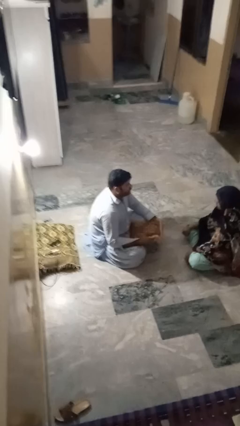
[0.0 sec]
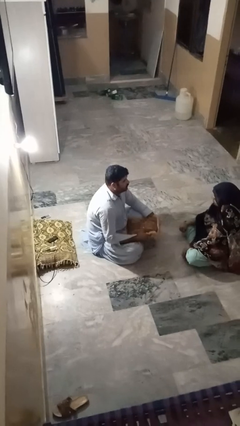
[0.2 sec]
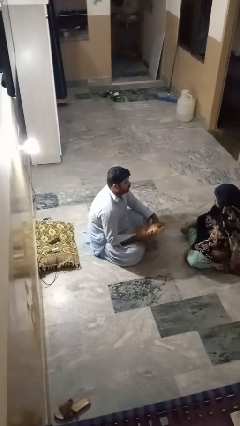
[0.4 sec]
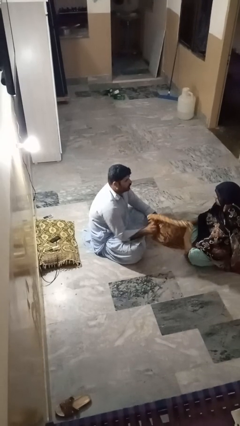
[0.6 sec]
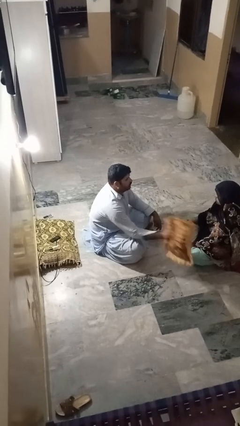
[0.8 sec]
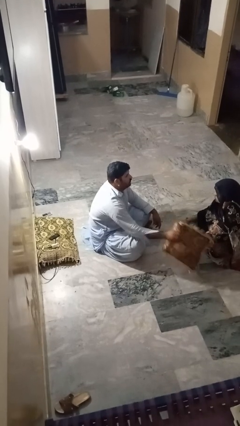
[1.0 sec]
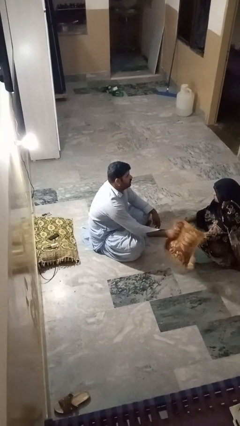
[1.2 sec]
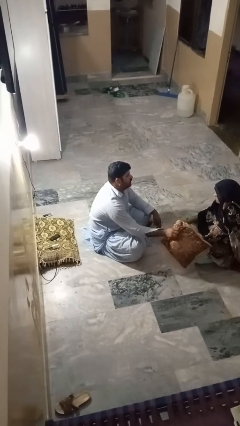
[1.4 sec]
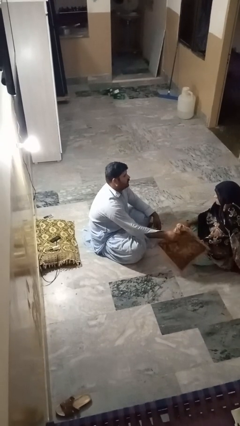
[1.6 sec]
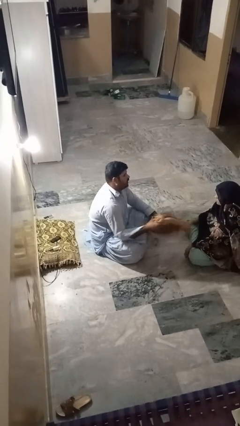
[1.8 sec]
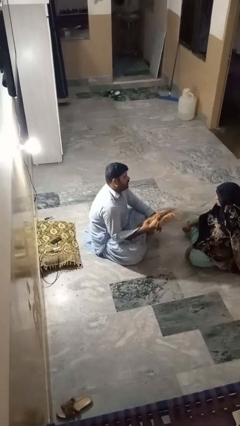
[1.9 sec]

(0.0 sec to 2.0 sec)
person hits person with pillow

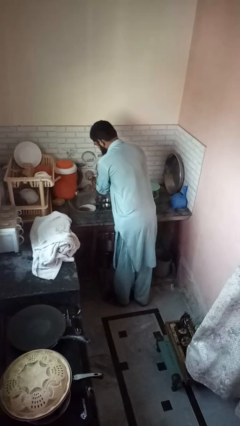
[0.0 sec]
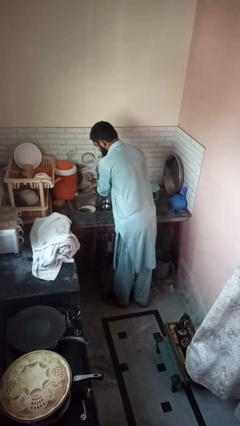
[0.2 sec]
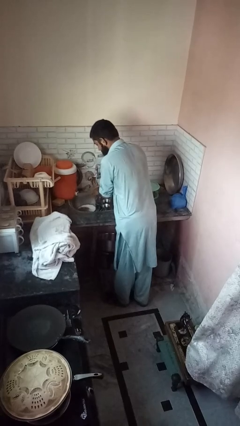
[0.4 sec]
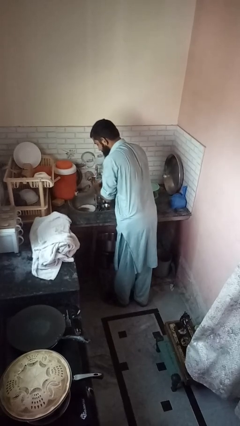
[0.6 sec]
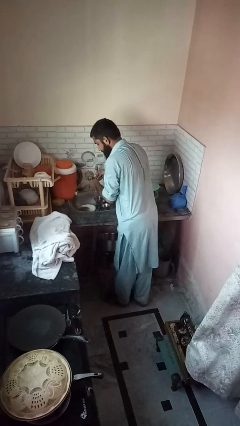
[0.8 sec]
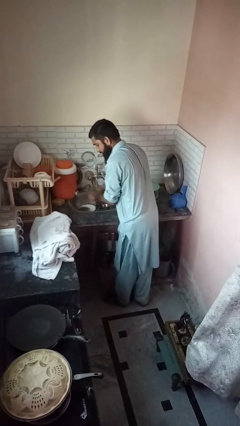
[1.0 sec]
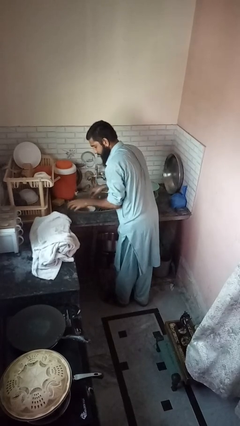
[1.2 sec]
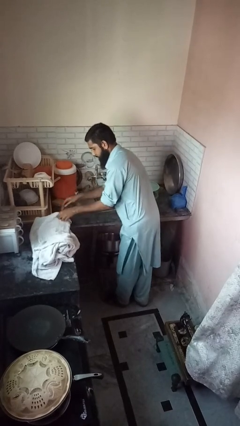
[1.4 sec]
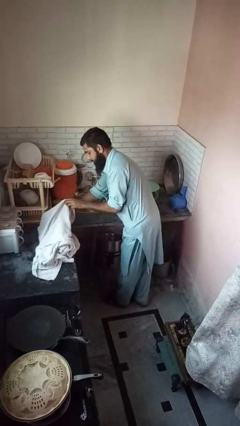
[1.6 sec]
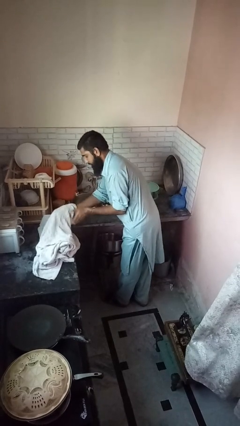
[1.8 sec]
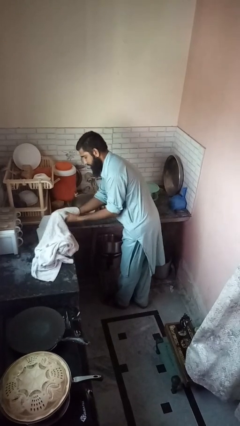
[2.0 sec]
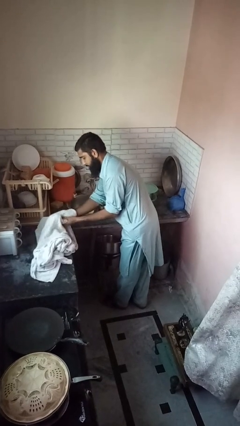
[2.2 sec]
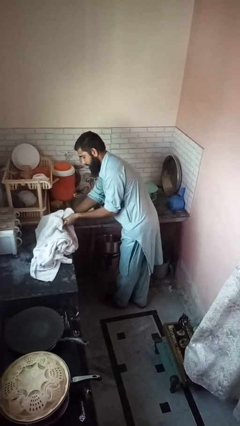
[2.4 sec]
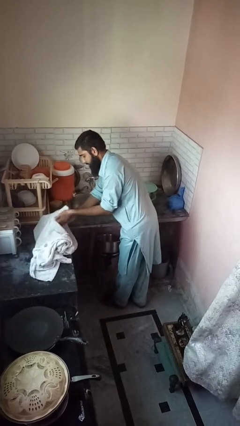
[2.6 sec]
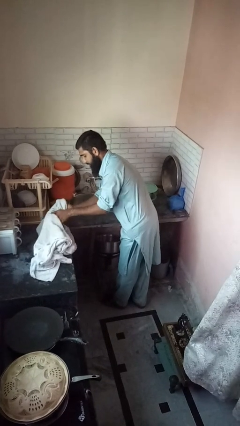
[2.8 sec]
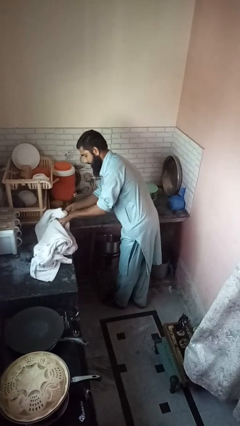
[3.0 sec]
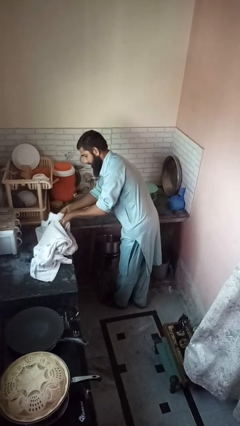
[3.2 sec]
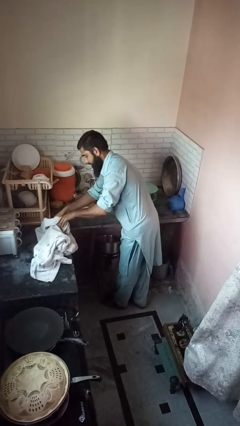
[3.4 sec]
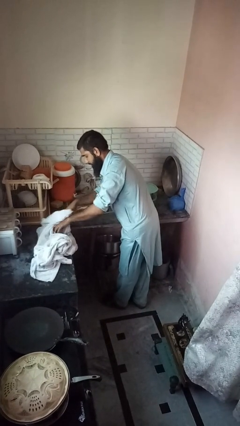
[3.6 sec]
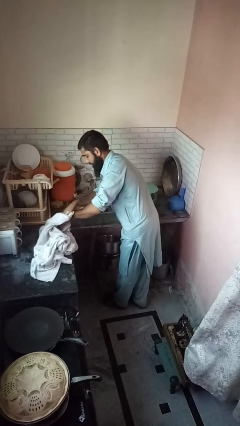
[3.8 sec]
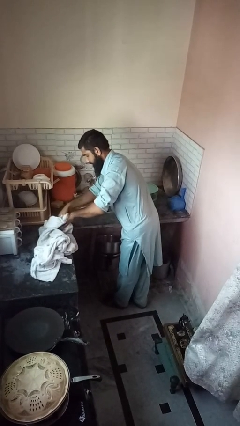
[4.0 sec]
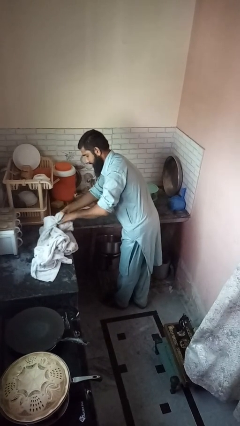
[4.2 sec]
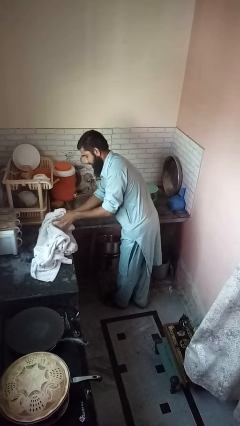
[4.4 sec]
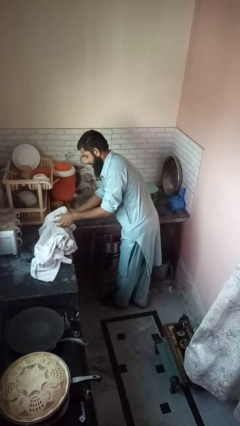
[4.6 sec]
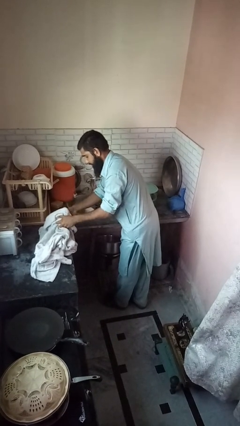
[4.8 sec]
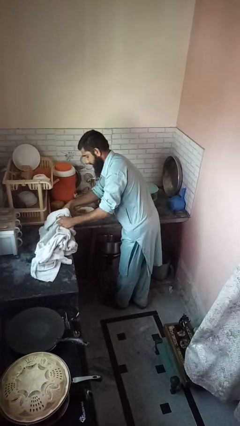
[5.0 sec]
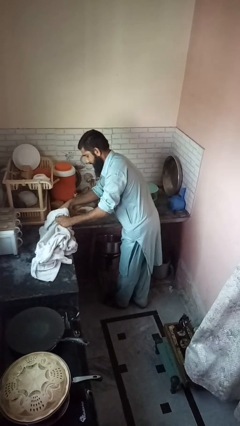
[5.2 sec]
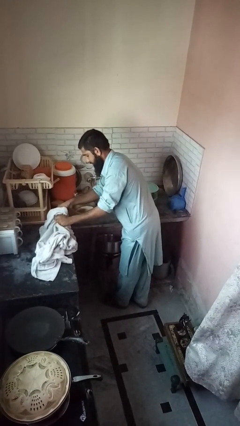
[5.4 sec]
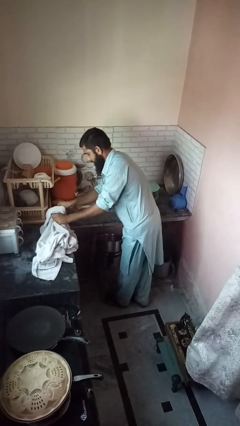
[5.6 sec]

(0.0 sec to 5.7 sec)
person dries hands with towel

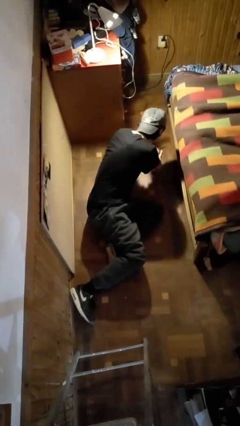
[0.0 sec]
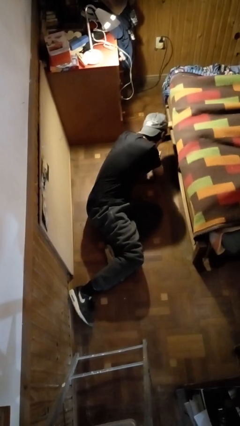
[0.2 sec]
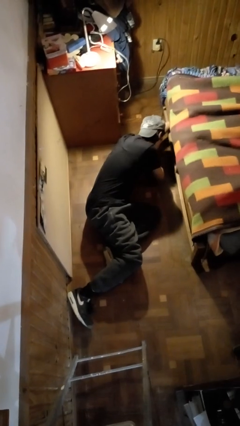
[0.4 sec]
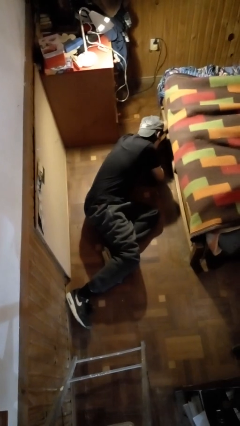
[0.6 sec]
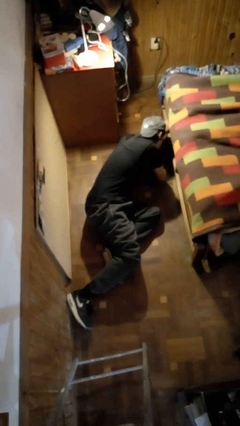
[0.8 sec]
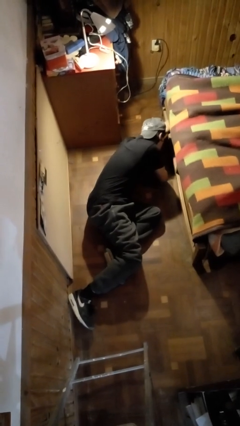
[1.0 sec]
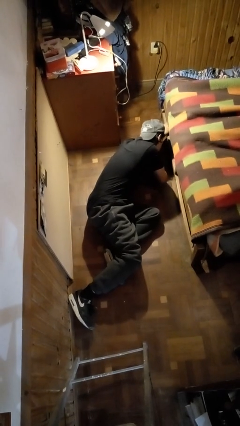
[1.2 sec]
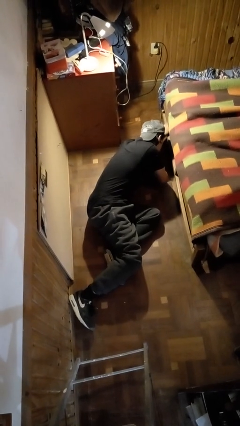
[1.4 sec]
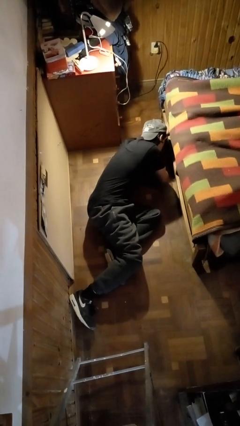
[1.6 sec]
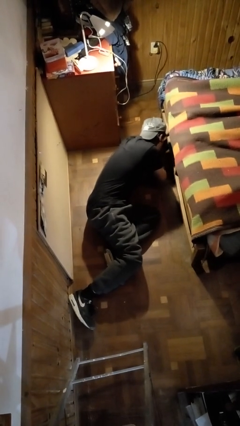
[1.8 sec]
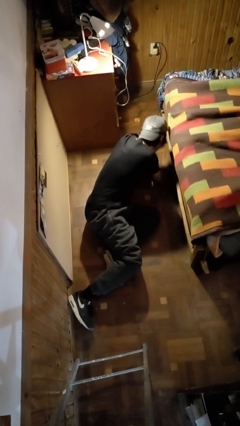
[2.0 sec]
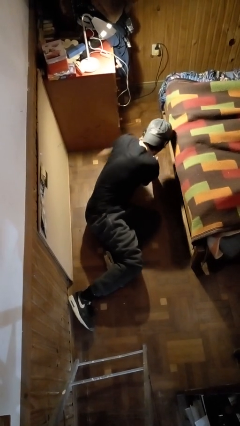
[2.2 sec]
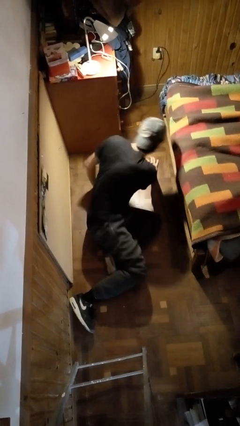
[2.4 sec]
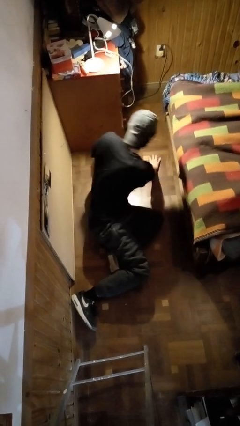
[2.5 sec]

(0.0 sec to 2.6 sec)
person searches under bed

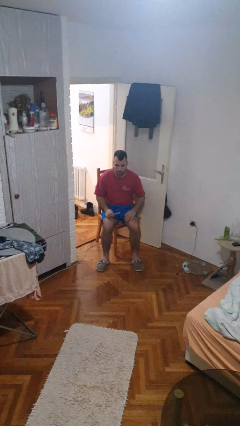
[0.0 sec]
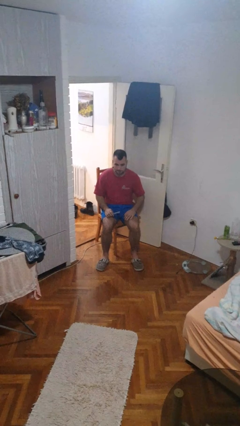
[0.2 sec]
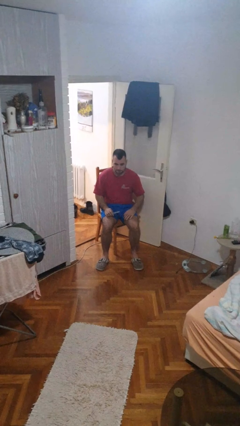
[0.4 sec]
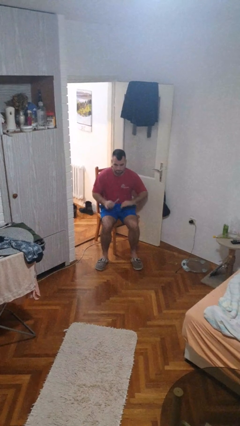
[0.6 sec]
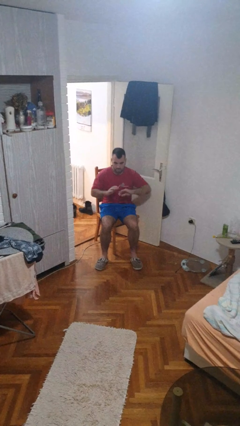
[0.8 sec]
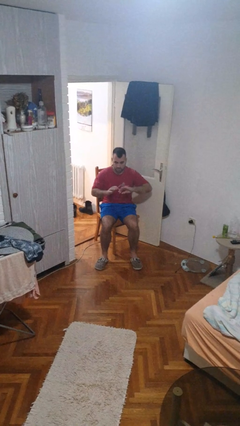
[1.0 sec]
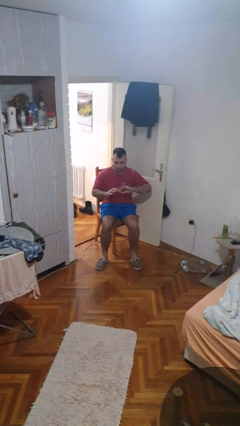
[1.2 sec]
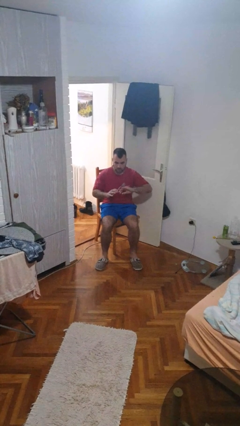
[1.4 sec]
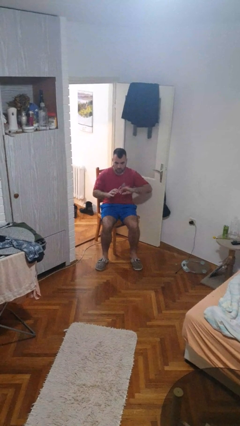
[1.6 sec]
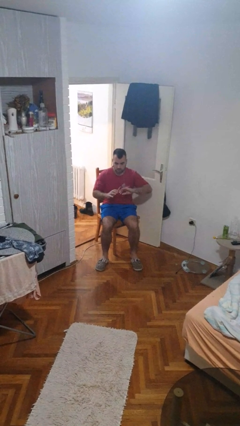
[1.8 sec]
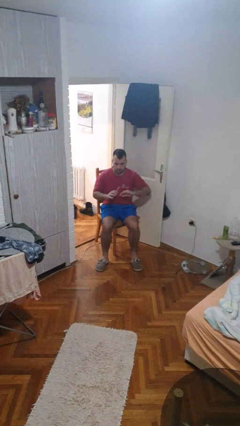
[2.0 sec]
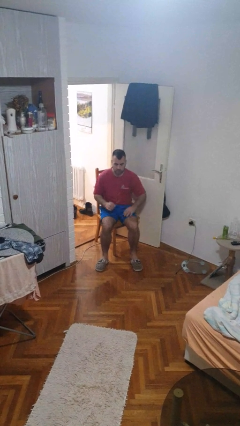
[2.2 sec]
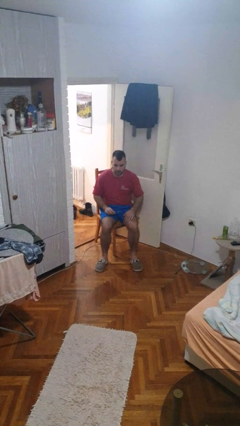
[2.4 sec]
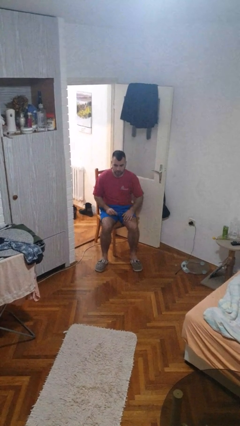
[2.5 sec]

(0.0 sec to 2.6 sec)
person files fingernails

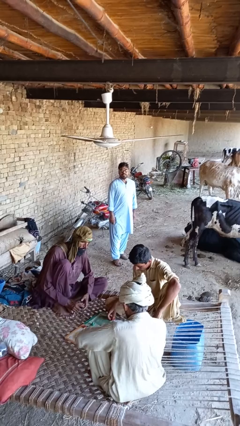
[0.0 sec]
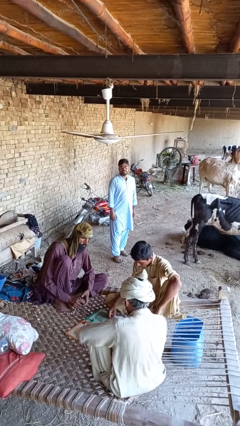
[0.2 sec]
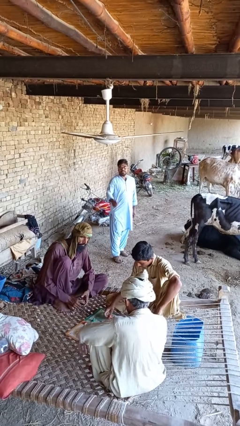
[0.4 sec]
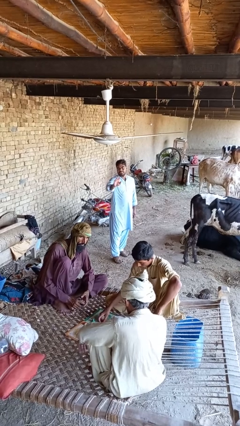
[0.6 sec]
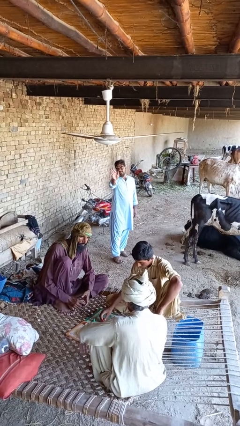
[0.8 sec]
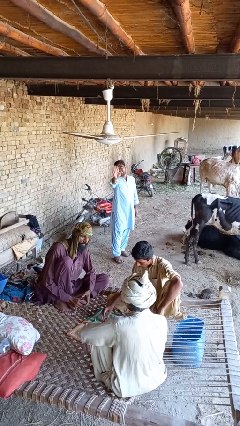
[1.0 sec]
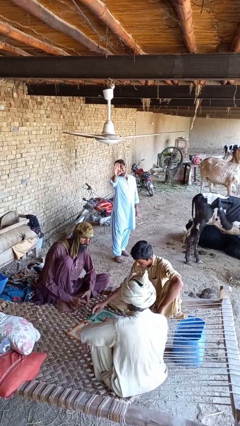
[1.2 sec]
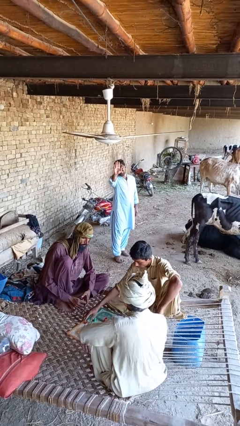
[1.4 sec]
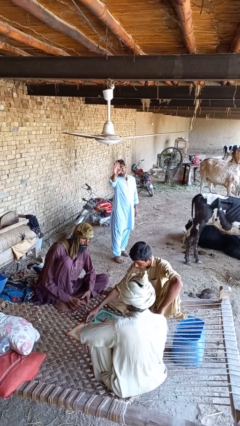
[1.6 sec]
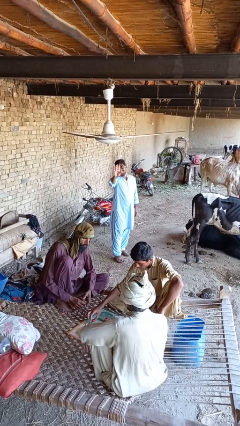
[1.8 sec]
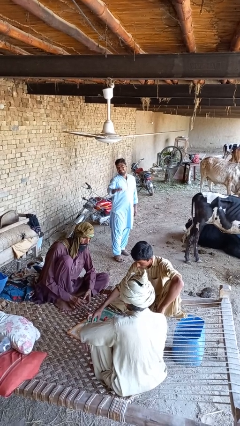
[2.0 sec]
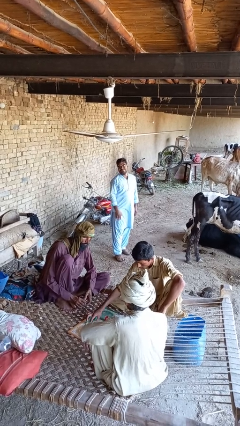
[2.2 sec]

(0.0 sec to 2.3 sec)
person waves at person

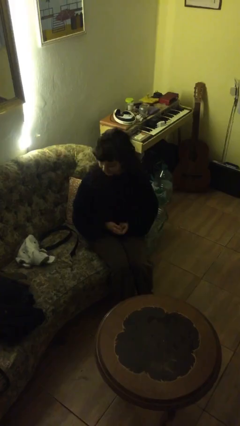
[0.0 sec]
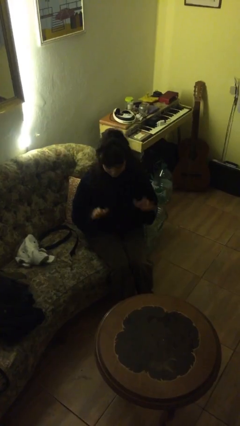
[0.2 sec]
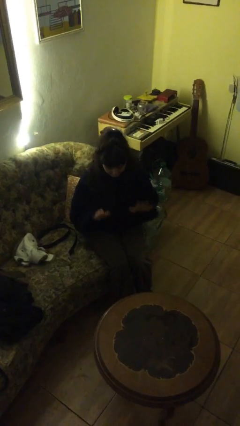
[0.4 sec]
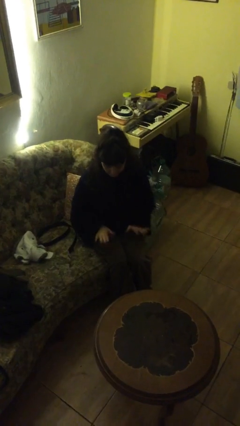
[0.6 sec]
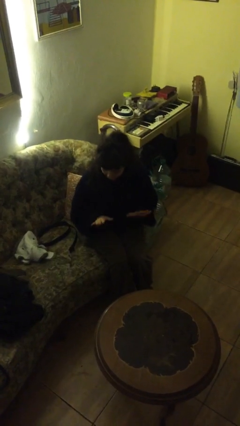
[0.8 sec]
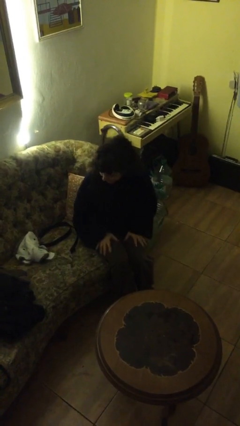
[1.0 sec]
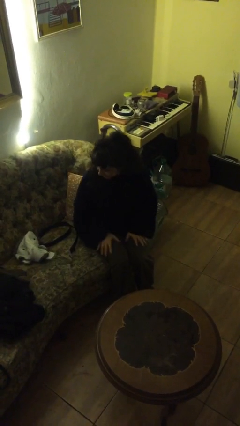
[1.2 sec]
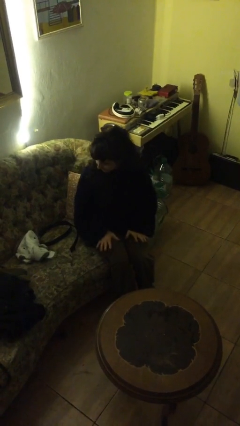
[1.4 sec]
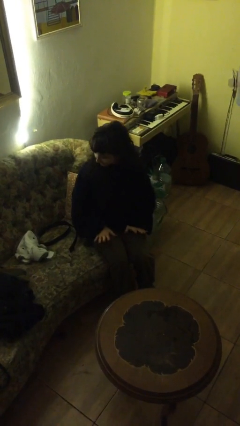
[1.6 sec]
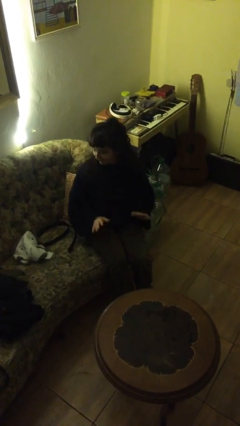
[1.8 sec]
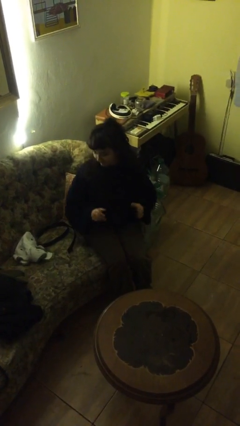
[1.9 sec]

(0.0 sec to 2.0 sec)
person slaps hands on thighs
